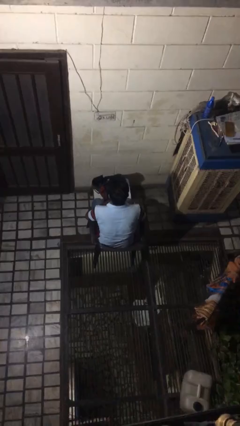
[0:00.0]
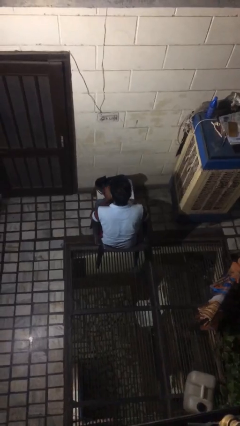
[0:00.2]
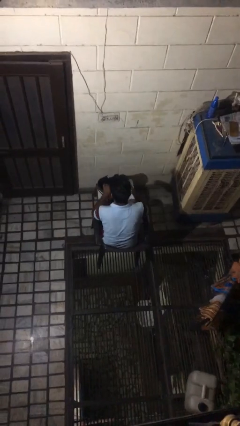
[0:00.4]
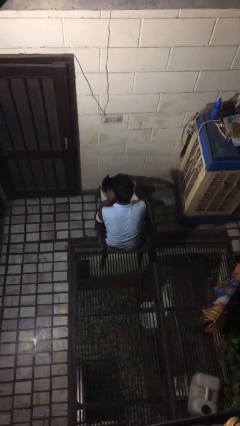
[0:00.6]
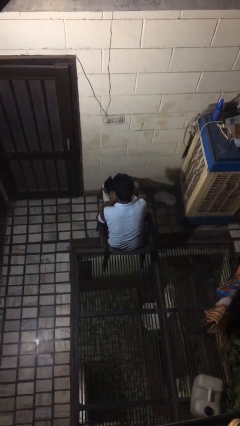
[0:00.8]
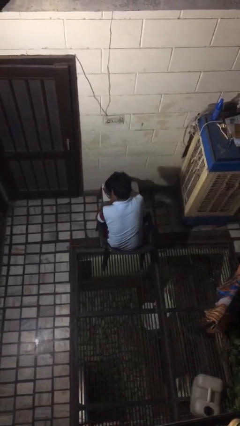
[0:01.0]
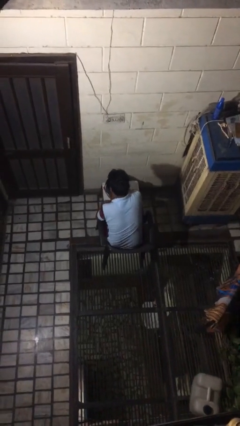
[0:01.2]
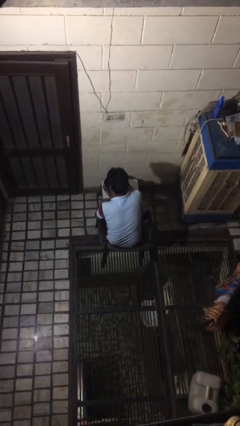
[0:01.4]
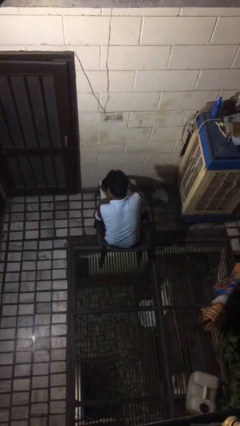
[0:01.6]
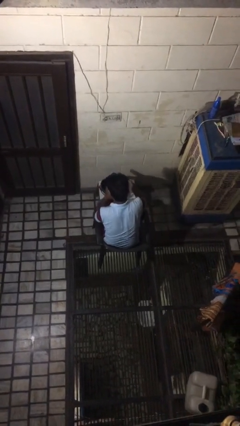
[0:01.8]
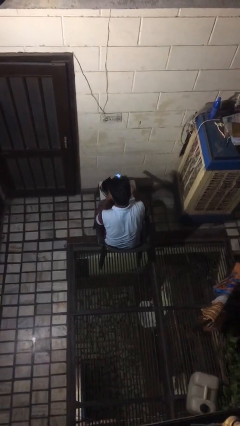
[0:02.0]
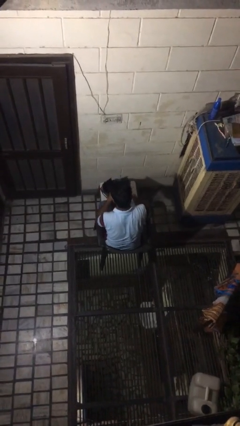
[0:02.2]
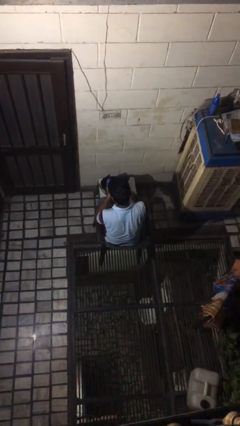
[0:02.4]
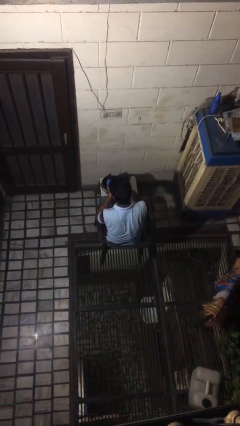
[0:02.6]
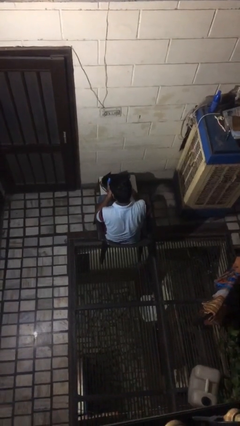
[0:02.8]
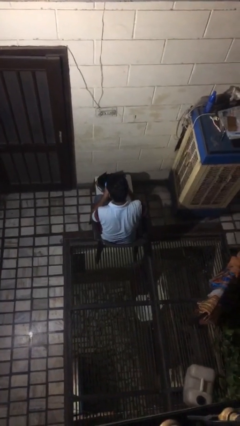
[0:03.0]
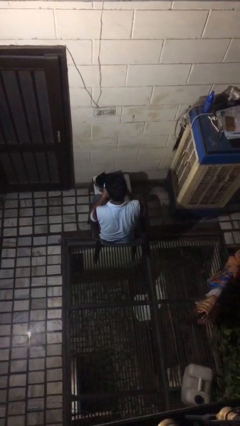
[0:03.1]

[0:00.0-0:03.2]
person takes object from bag

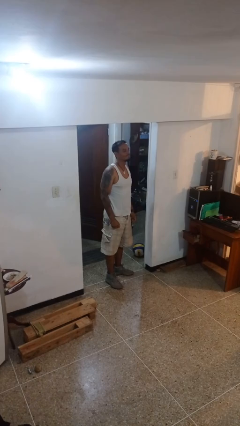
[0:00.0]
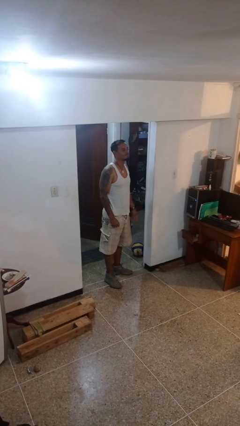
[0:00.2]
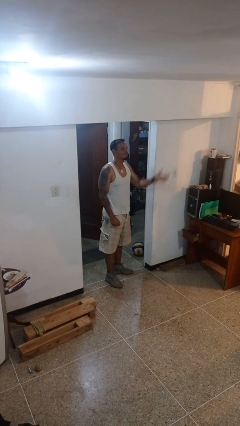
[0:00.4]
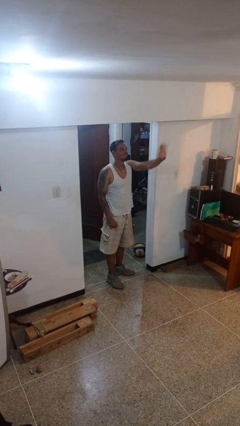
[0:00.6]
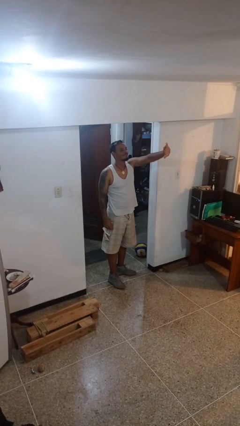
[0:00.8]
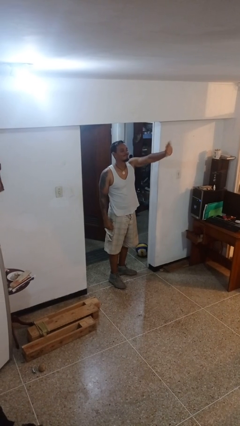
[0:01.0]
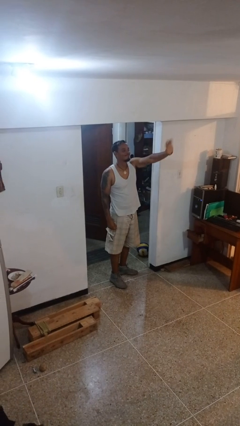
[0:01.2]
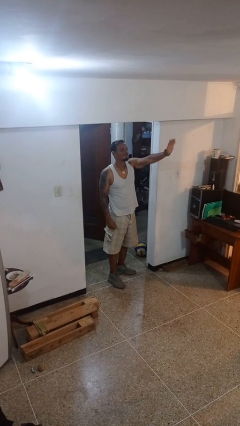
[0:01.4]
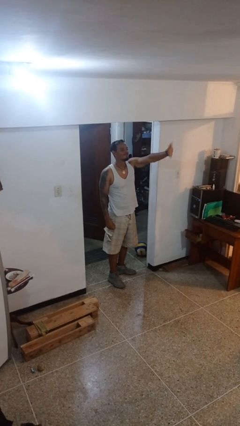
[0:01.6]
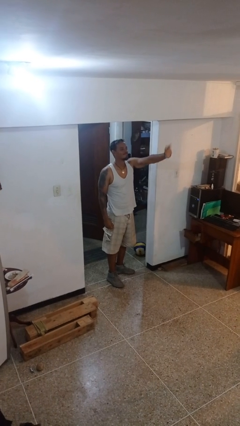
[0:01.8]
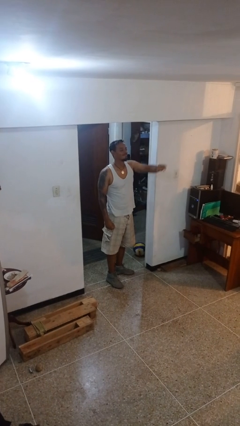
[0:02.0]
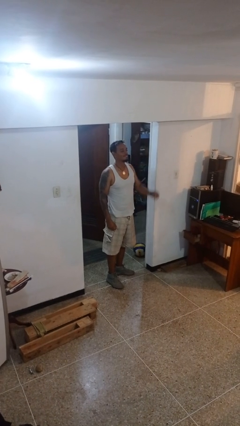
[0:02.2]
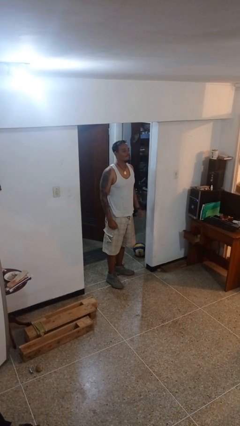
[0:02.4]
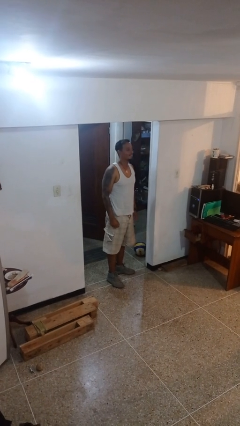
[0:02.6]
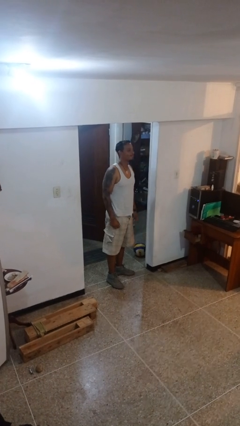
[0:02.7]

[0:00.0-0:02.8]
person waves at person

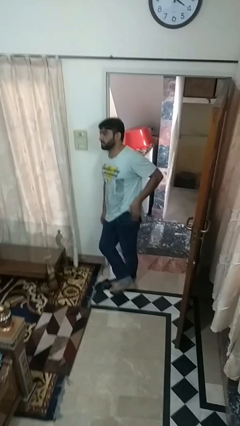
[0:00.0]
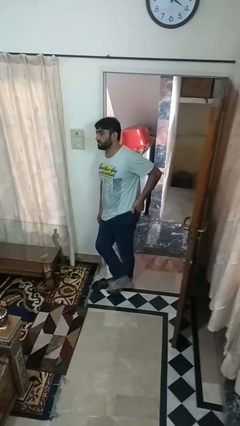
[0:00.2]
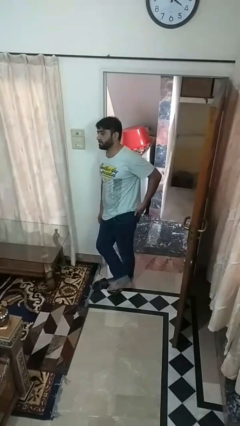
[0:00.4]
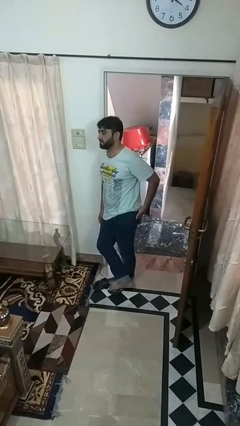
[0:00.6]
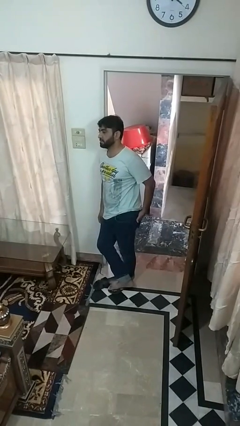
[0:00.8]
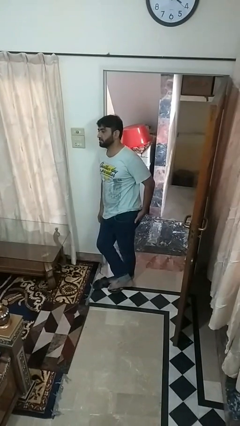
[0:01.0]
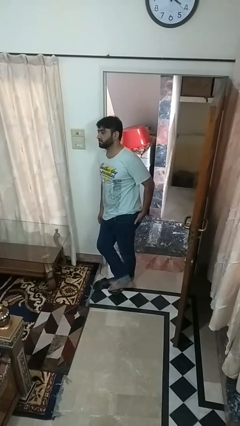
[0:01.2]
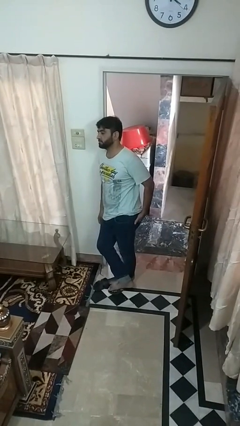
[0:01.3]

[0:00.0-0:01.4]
person puts hands in back pockets

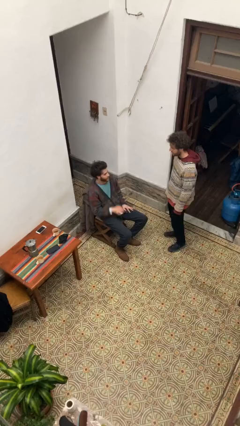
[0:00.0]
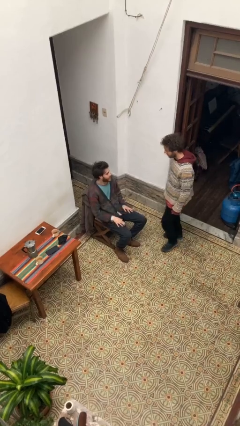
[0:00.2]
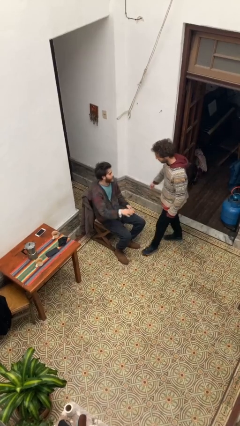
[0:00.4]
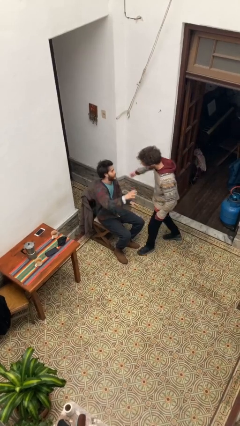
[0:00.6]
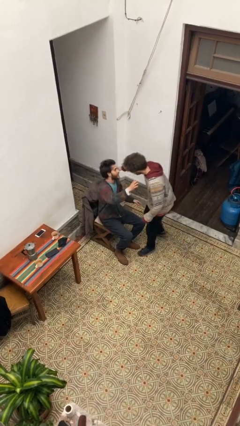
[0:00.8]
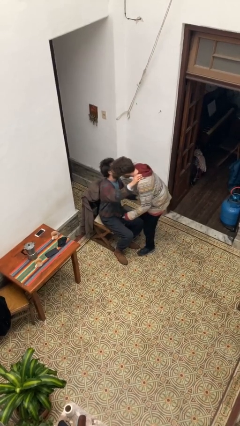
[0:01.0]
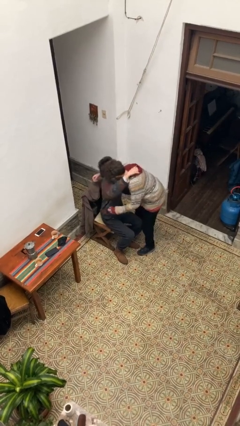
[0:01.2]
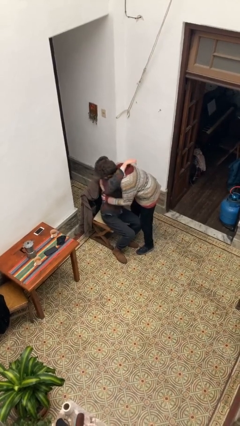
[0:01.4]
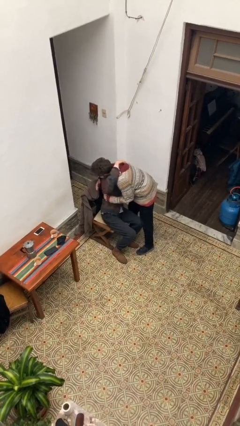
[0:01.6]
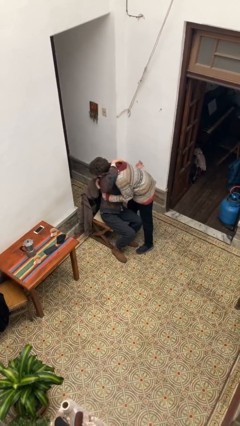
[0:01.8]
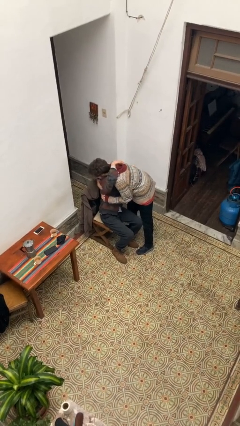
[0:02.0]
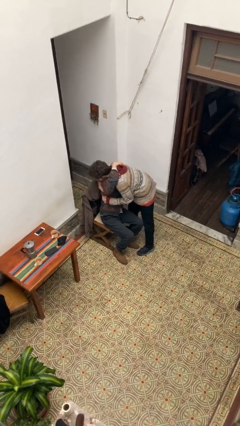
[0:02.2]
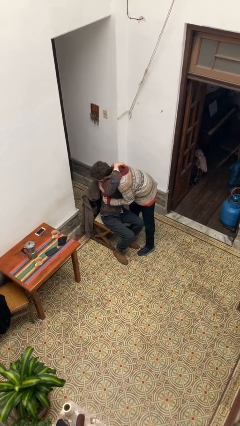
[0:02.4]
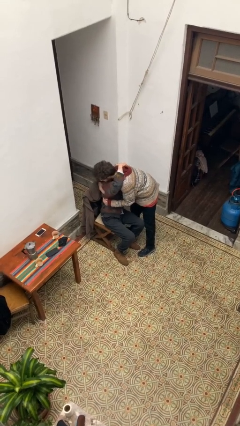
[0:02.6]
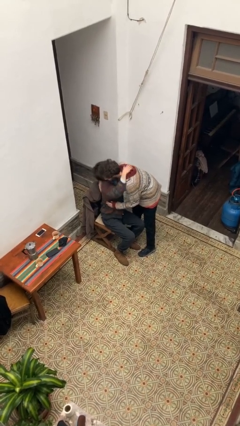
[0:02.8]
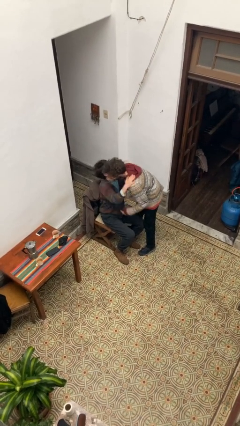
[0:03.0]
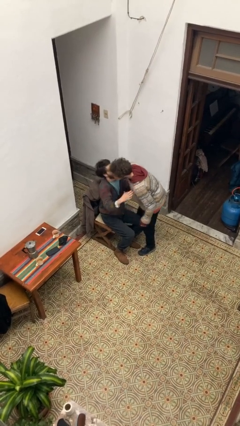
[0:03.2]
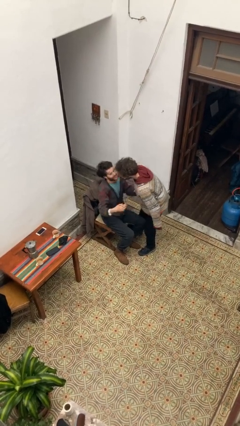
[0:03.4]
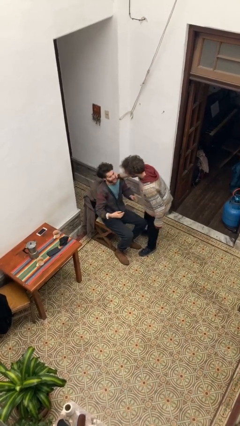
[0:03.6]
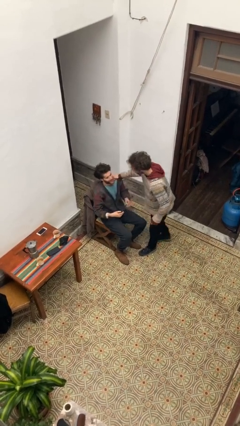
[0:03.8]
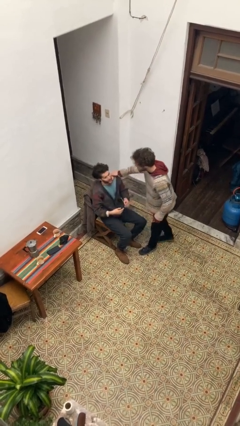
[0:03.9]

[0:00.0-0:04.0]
person embraces person

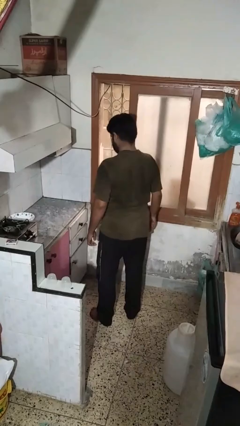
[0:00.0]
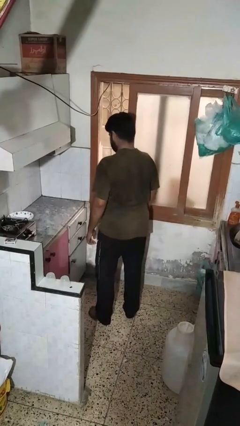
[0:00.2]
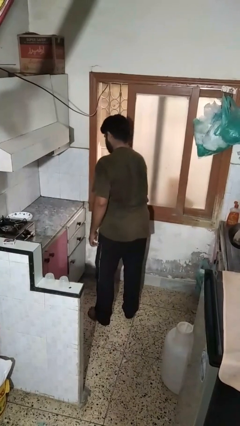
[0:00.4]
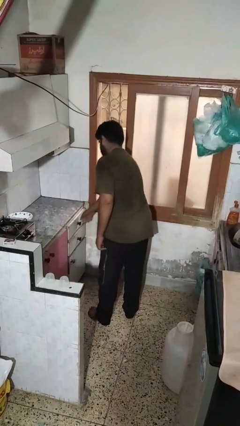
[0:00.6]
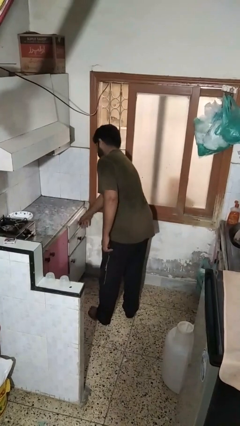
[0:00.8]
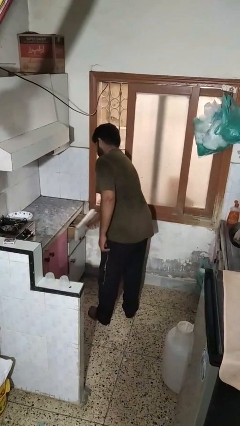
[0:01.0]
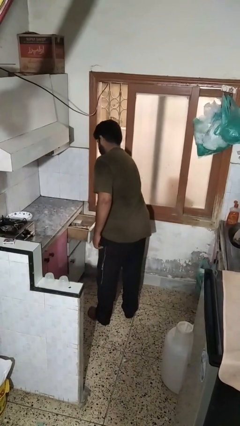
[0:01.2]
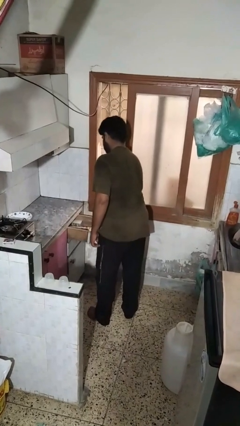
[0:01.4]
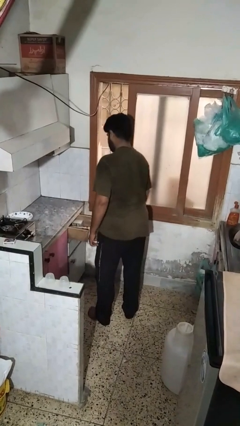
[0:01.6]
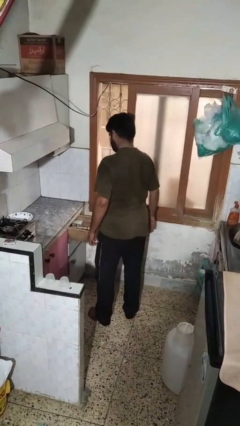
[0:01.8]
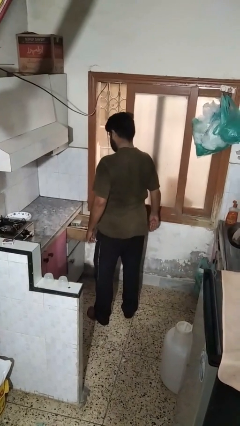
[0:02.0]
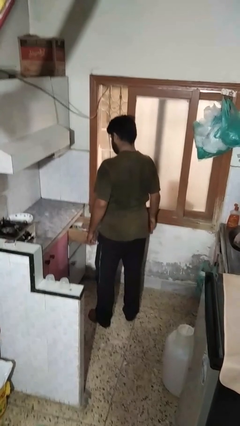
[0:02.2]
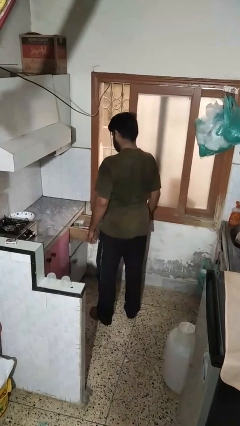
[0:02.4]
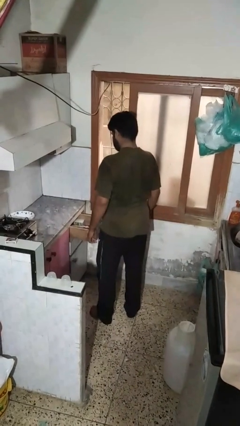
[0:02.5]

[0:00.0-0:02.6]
person opens kitchen drawer

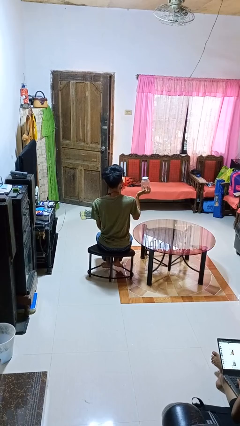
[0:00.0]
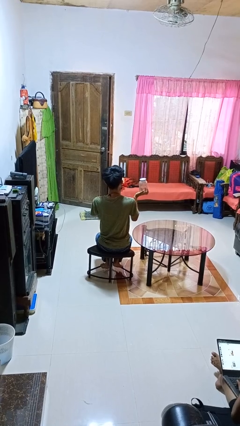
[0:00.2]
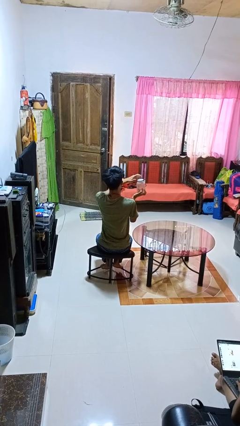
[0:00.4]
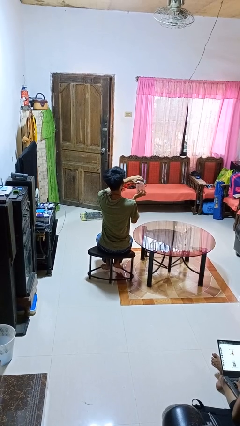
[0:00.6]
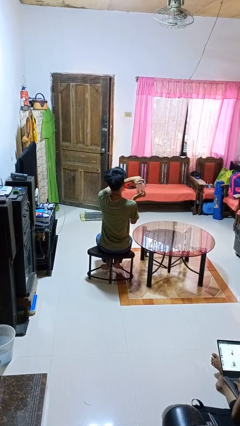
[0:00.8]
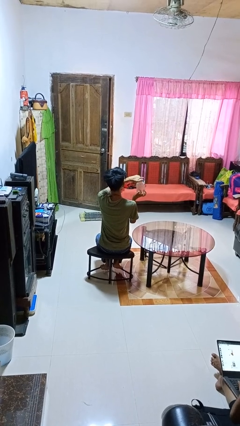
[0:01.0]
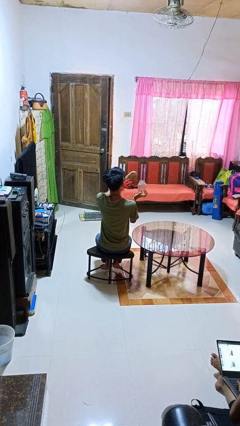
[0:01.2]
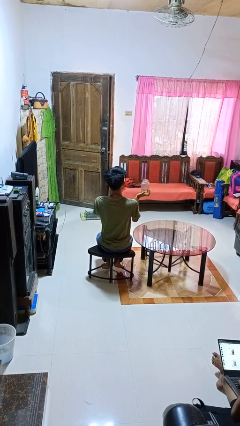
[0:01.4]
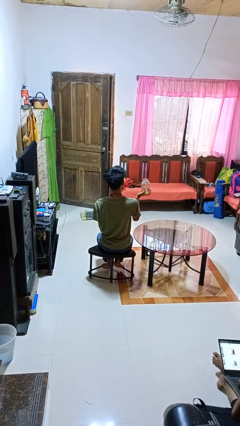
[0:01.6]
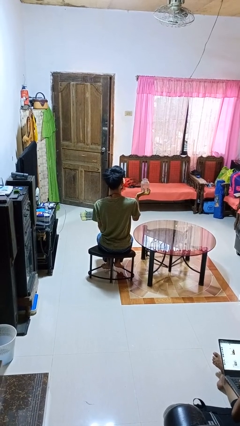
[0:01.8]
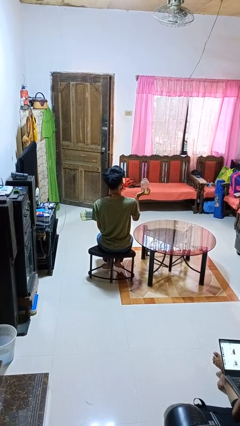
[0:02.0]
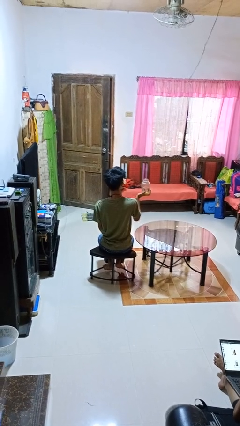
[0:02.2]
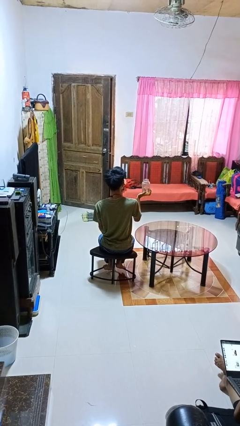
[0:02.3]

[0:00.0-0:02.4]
person opens jar

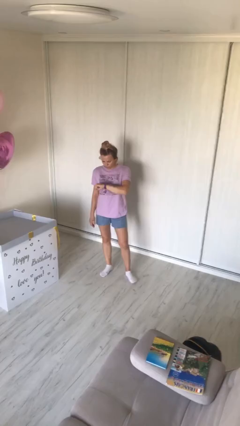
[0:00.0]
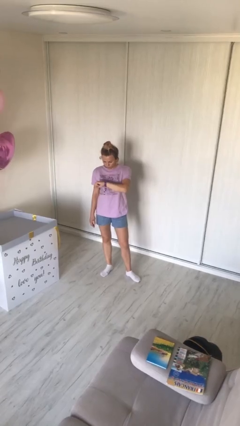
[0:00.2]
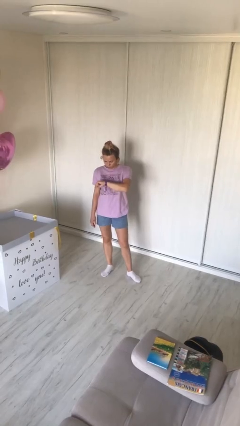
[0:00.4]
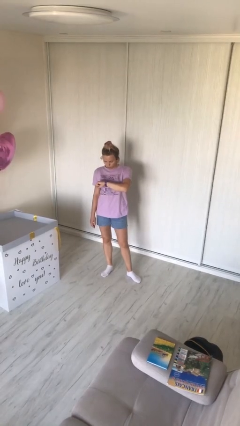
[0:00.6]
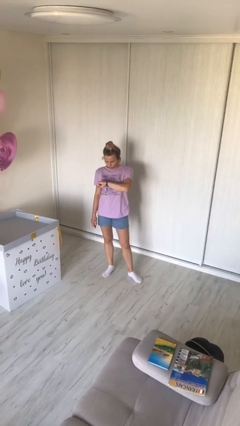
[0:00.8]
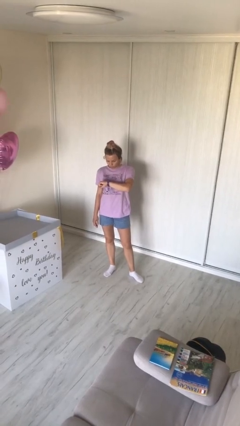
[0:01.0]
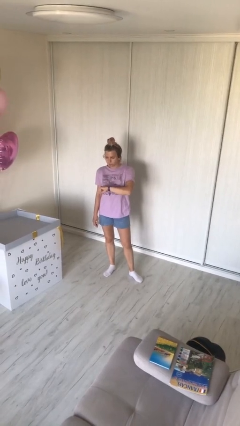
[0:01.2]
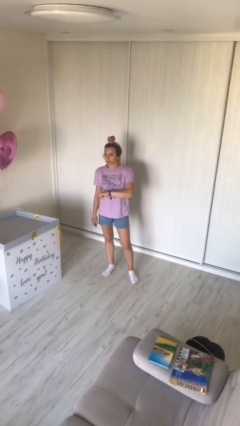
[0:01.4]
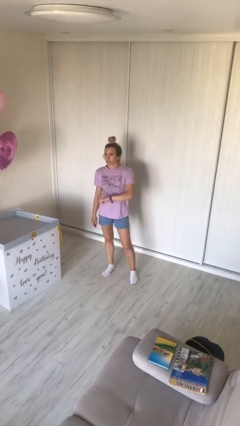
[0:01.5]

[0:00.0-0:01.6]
person looks at wristwatch
